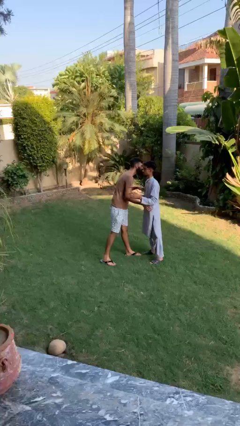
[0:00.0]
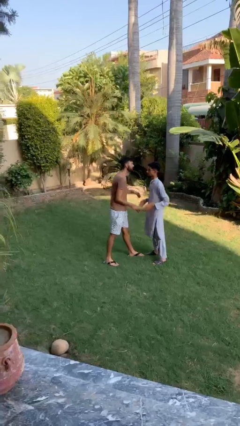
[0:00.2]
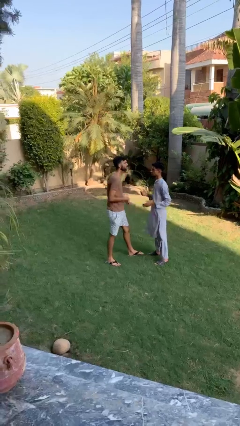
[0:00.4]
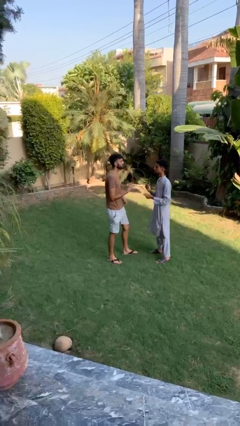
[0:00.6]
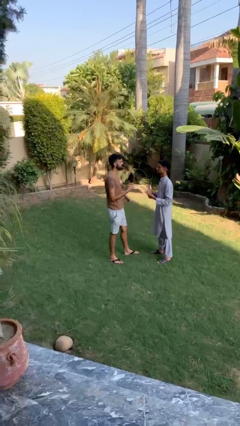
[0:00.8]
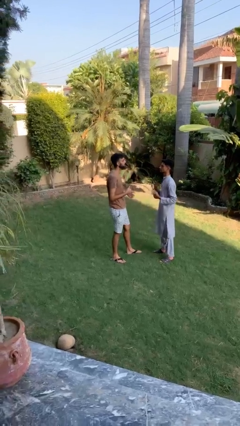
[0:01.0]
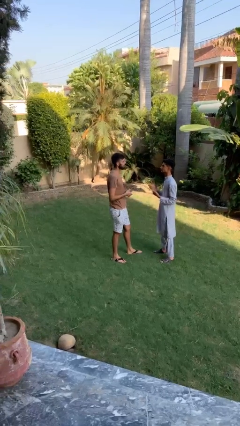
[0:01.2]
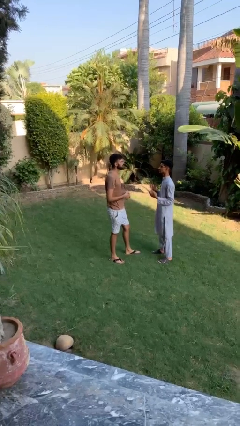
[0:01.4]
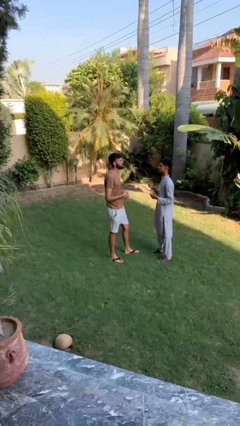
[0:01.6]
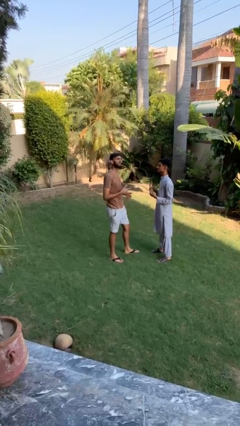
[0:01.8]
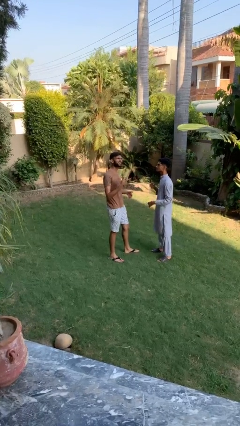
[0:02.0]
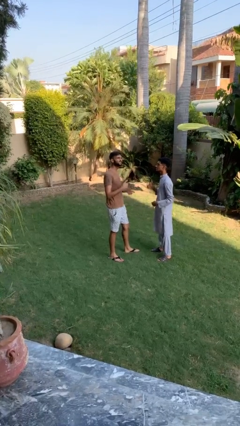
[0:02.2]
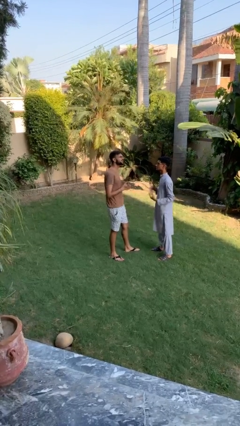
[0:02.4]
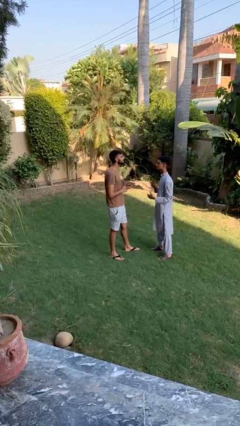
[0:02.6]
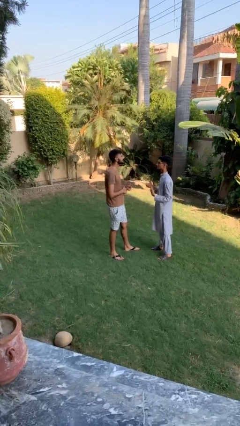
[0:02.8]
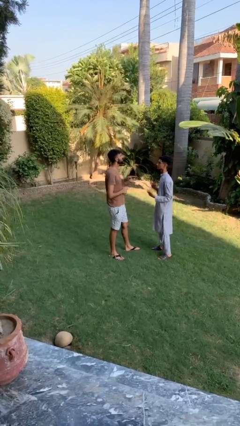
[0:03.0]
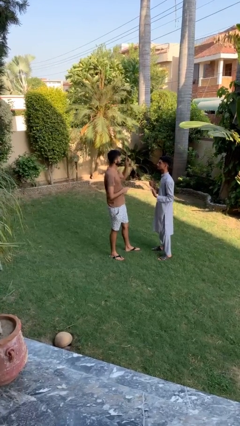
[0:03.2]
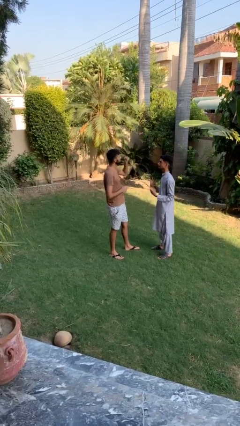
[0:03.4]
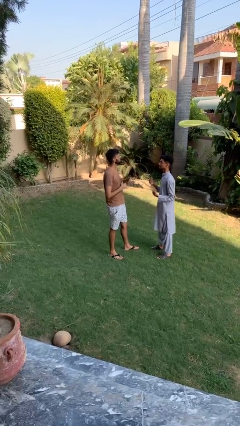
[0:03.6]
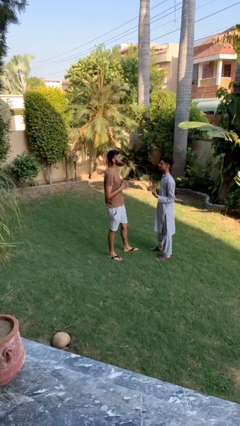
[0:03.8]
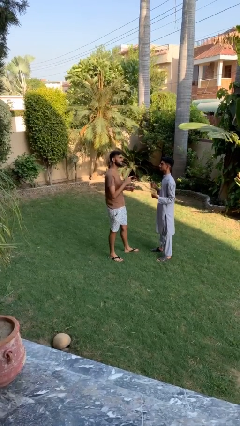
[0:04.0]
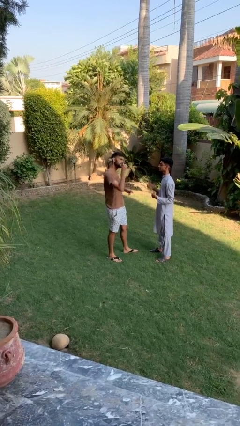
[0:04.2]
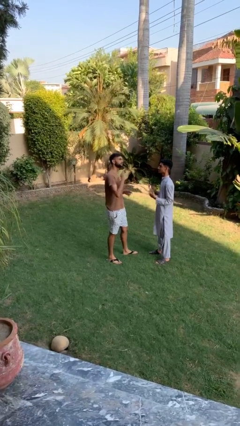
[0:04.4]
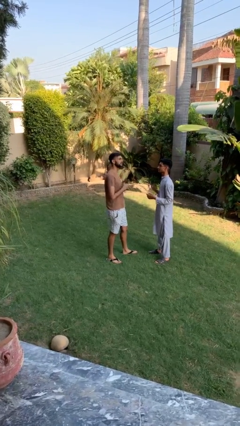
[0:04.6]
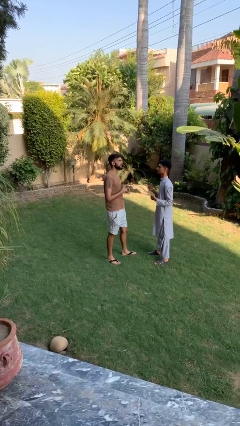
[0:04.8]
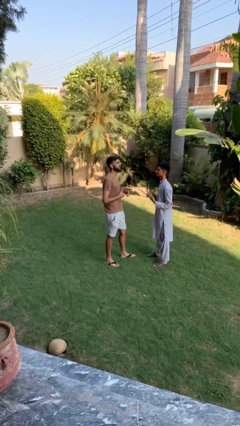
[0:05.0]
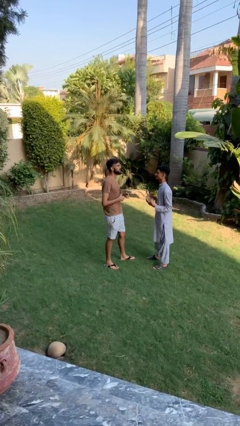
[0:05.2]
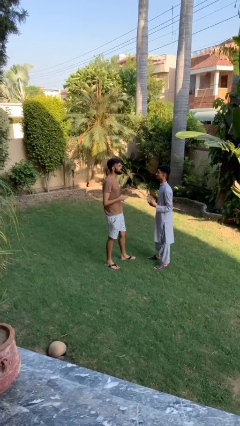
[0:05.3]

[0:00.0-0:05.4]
person talks to person

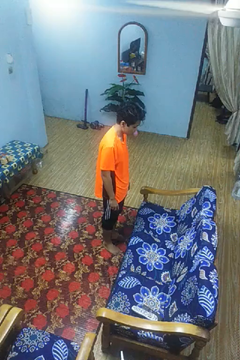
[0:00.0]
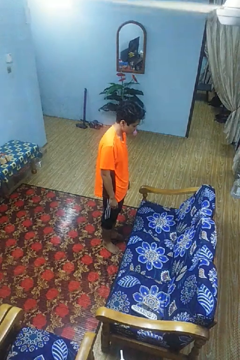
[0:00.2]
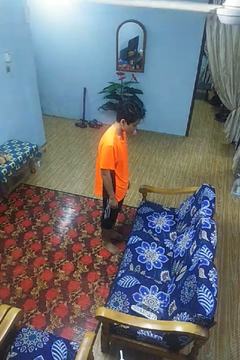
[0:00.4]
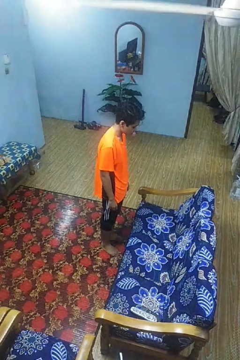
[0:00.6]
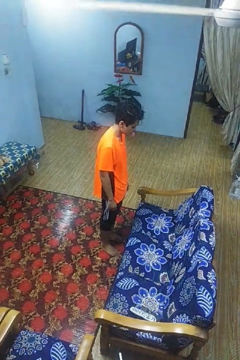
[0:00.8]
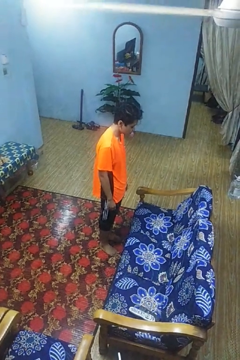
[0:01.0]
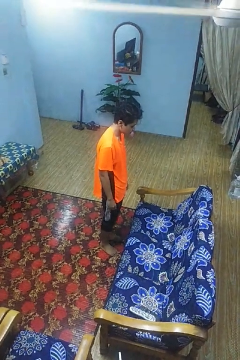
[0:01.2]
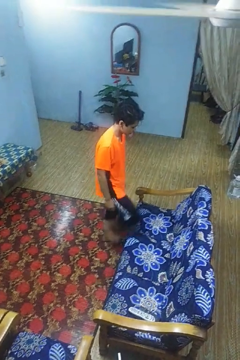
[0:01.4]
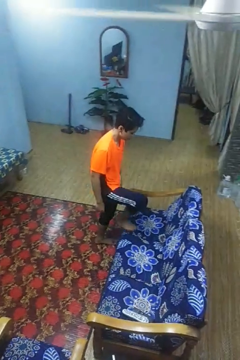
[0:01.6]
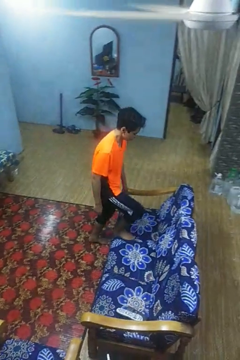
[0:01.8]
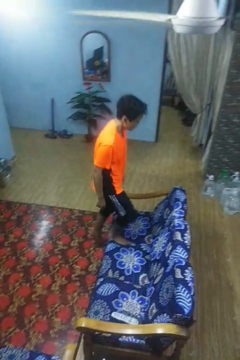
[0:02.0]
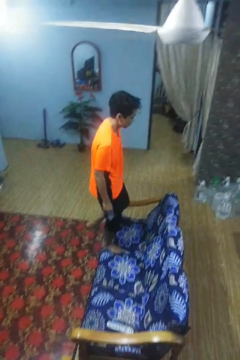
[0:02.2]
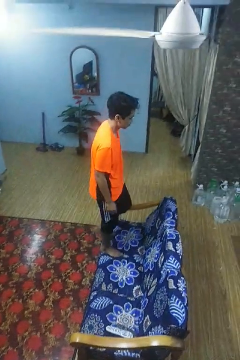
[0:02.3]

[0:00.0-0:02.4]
person climbs on couch

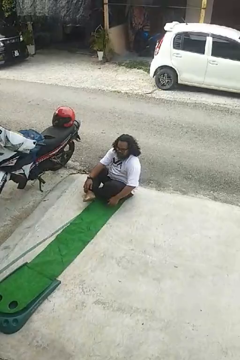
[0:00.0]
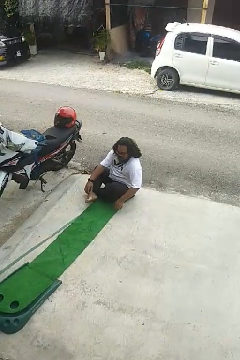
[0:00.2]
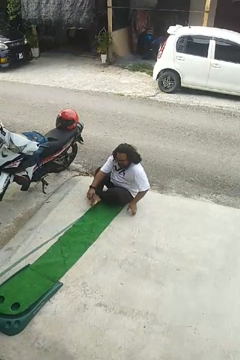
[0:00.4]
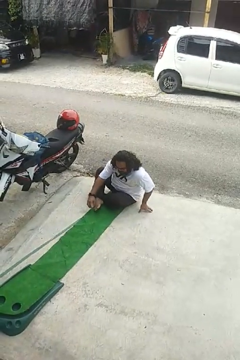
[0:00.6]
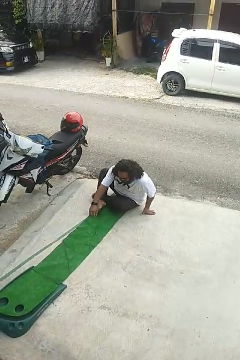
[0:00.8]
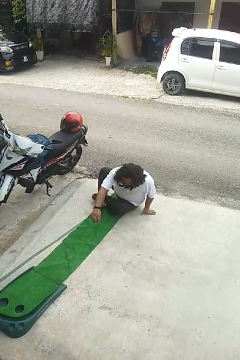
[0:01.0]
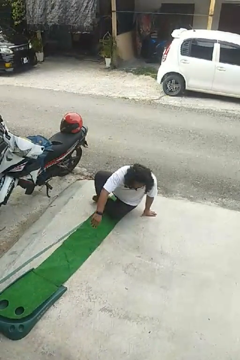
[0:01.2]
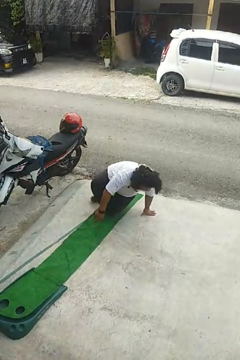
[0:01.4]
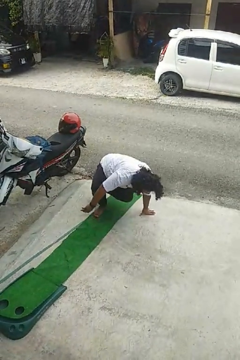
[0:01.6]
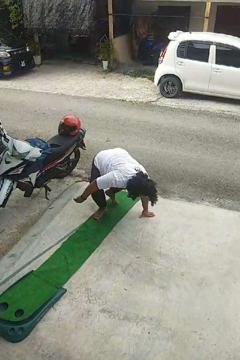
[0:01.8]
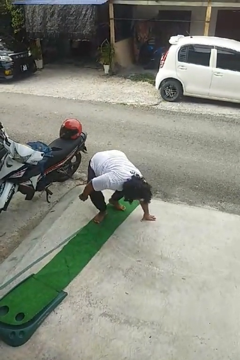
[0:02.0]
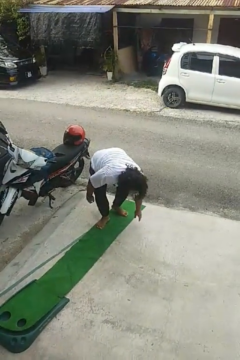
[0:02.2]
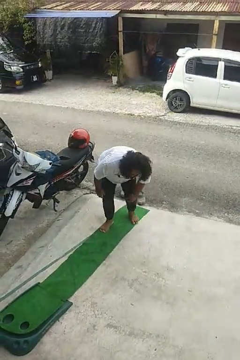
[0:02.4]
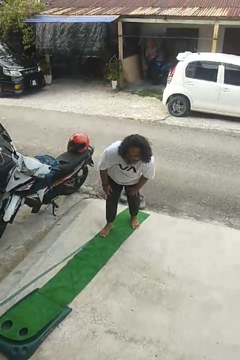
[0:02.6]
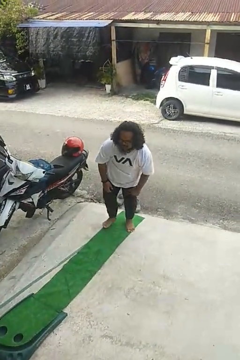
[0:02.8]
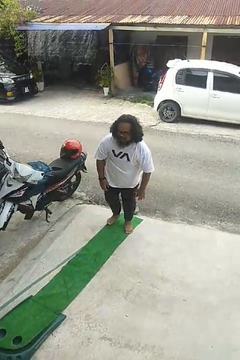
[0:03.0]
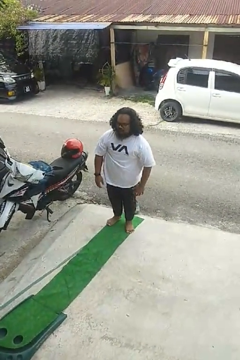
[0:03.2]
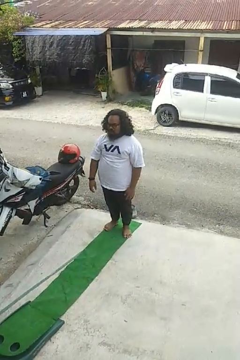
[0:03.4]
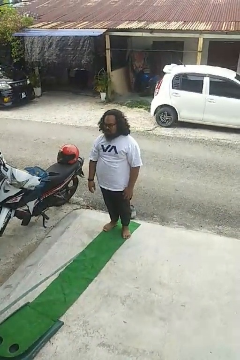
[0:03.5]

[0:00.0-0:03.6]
person stands up from floor

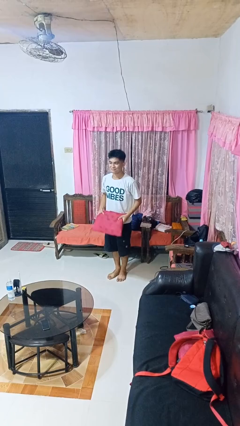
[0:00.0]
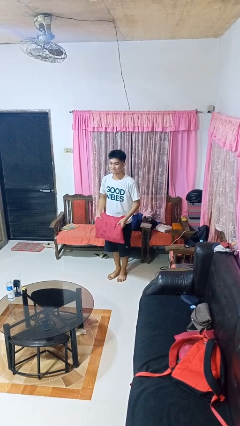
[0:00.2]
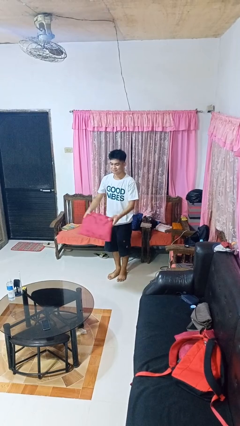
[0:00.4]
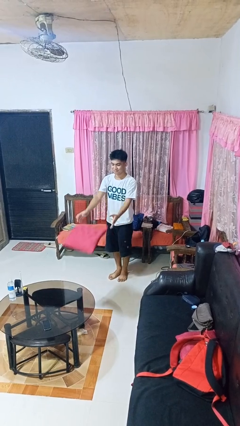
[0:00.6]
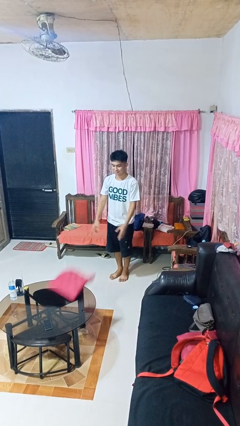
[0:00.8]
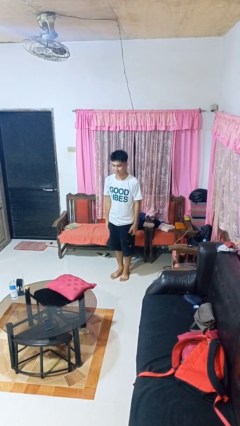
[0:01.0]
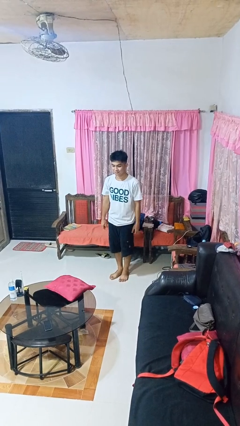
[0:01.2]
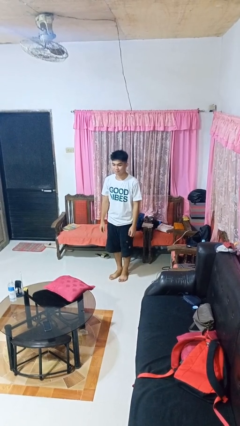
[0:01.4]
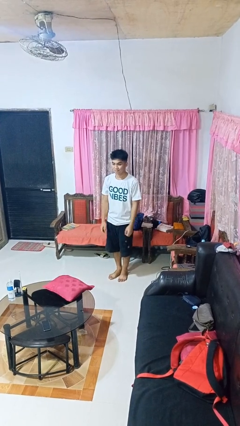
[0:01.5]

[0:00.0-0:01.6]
person throws object on table

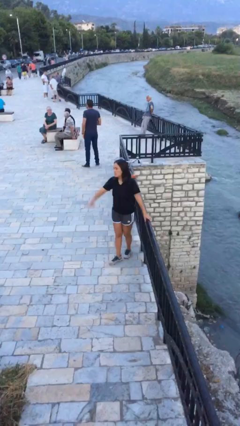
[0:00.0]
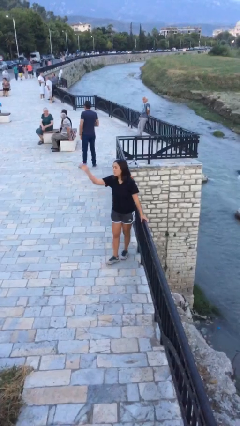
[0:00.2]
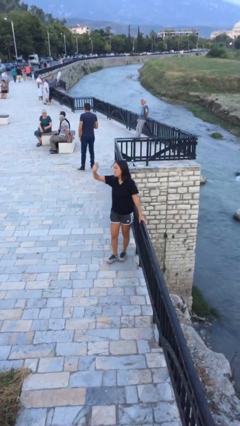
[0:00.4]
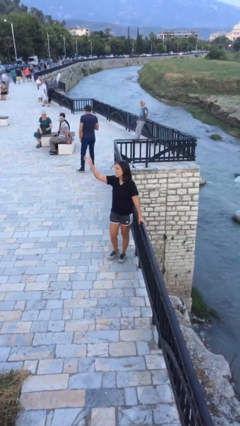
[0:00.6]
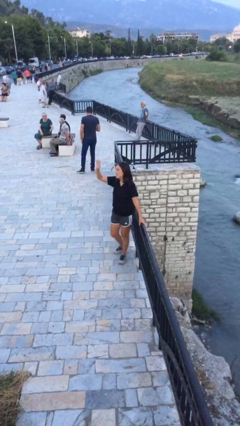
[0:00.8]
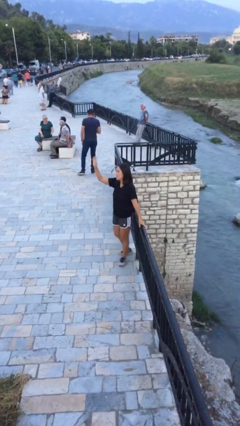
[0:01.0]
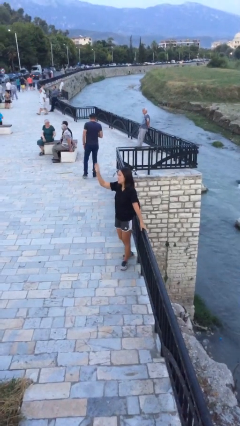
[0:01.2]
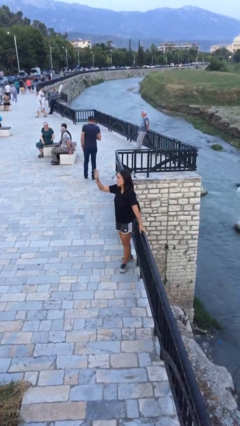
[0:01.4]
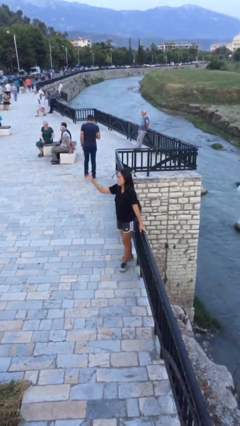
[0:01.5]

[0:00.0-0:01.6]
person waves at person

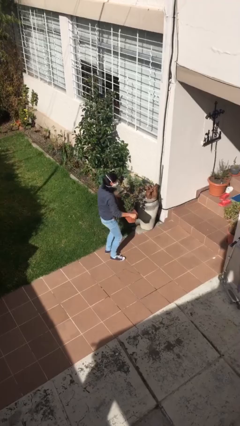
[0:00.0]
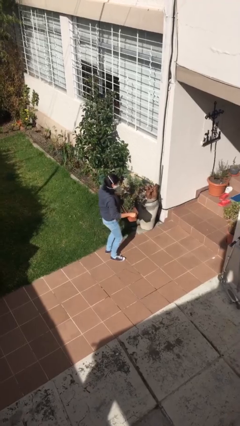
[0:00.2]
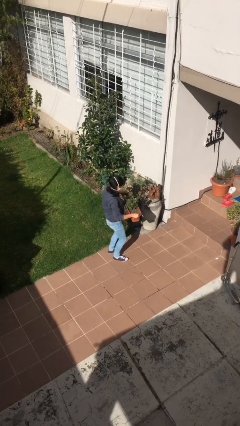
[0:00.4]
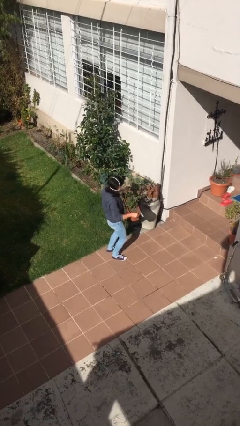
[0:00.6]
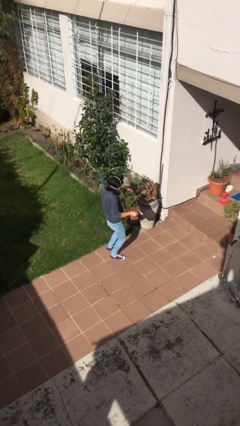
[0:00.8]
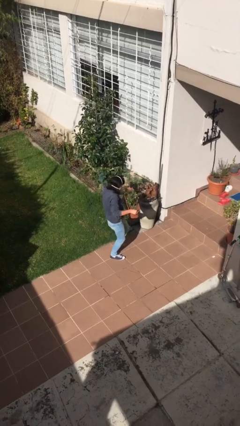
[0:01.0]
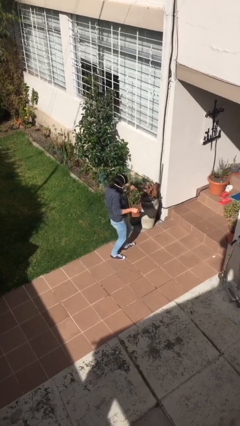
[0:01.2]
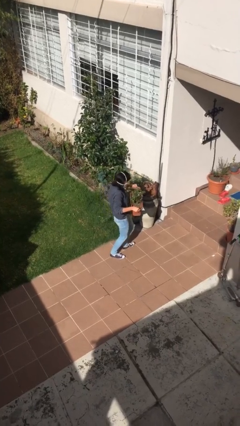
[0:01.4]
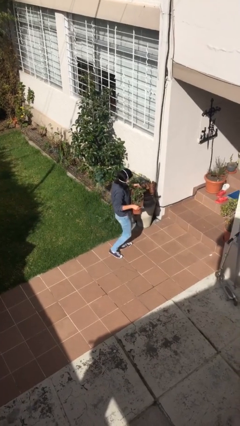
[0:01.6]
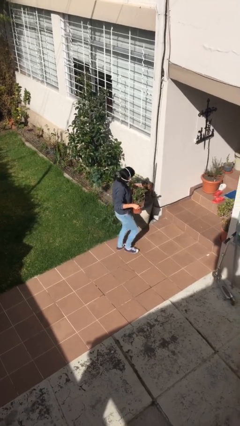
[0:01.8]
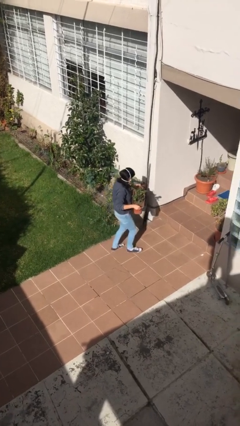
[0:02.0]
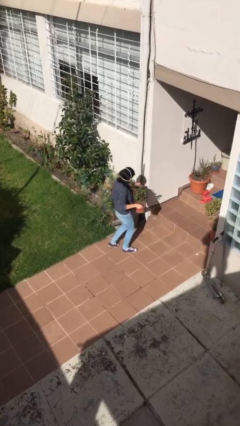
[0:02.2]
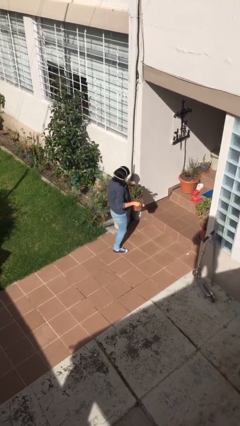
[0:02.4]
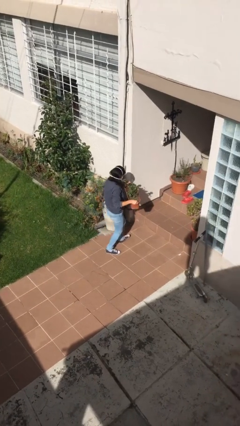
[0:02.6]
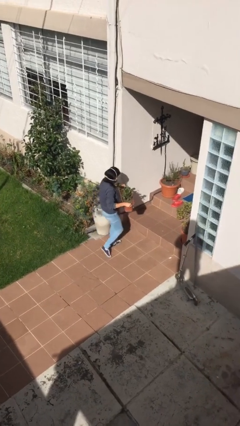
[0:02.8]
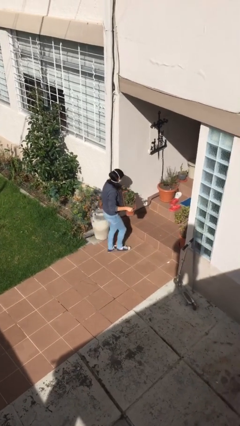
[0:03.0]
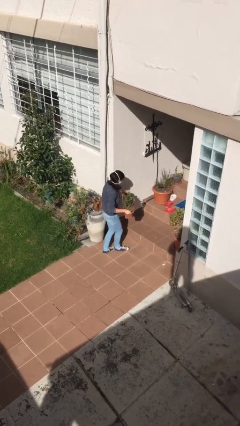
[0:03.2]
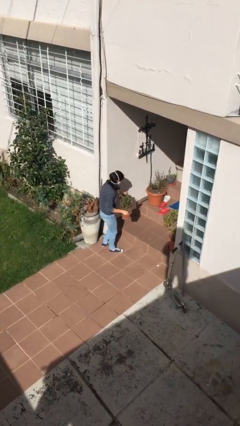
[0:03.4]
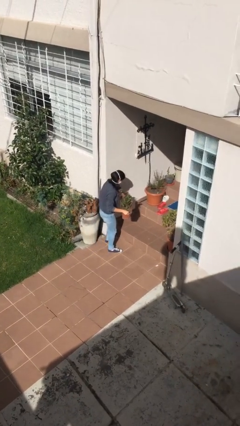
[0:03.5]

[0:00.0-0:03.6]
person carries heavy object

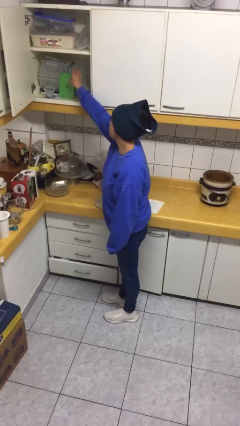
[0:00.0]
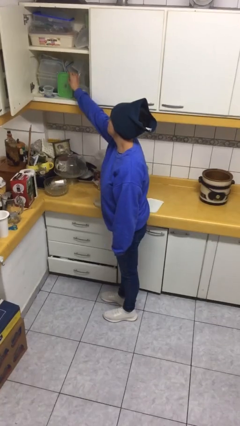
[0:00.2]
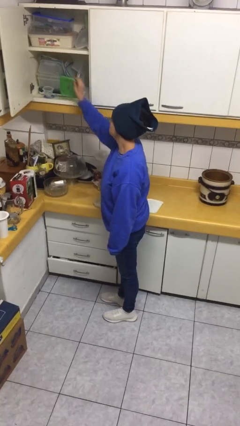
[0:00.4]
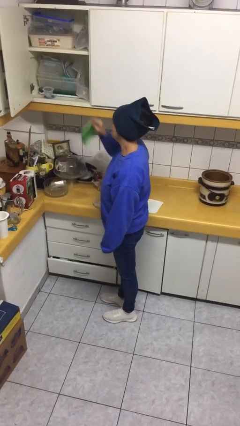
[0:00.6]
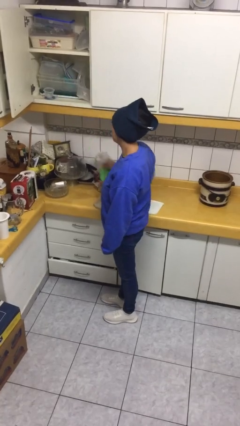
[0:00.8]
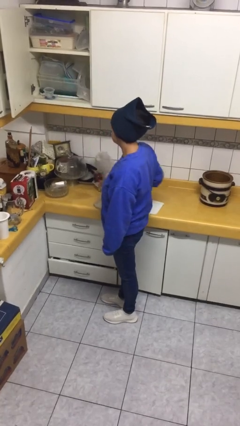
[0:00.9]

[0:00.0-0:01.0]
person takes object from cabinet
